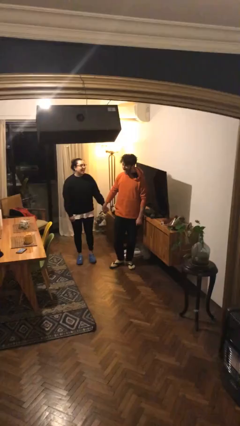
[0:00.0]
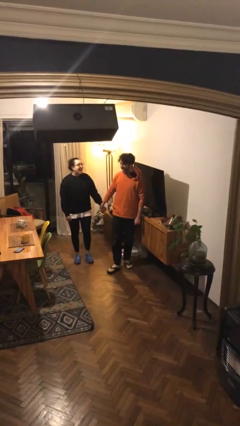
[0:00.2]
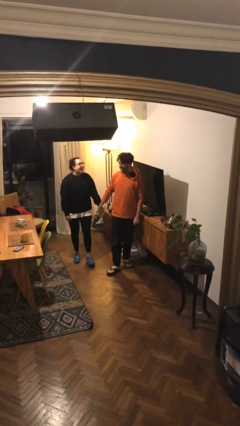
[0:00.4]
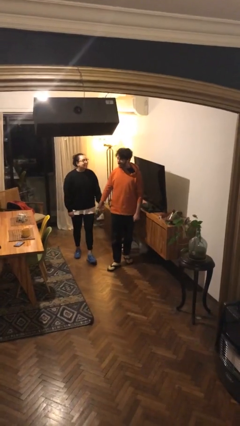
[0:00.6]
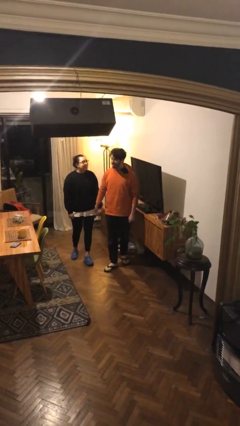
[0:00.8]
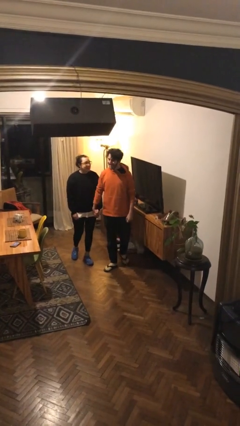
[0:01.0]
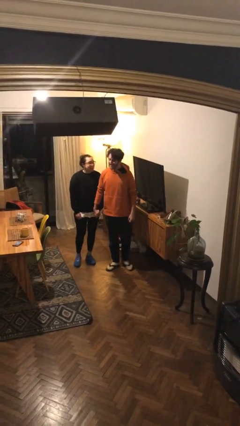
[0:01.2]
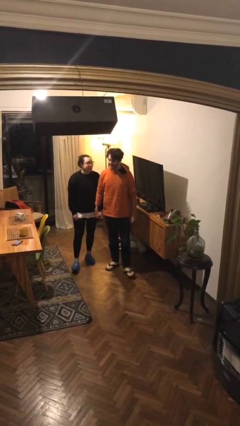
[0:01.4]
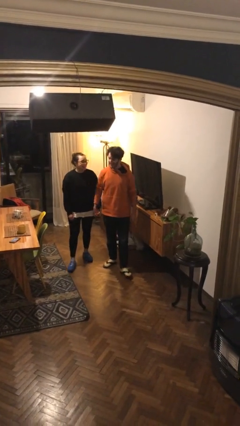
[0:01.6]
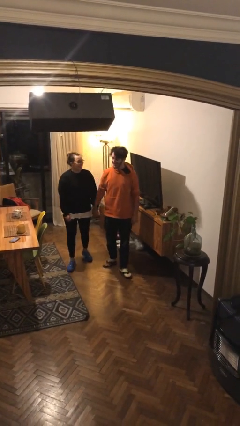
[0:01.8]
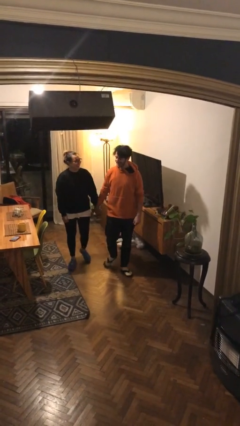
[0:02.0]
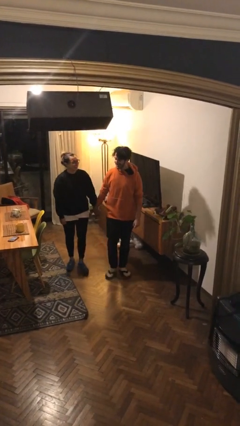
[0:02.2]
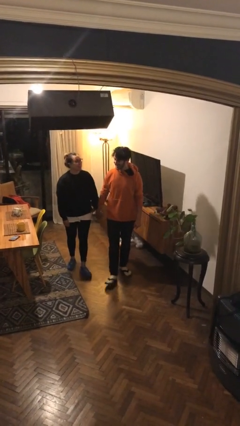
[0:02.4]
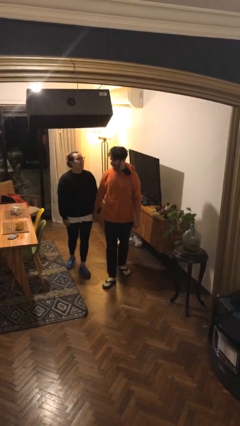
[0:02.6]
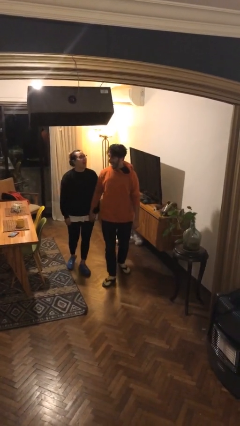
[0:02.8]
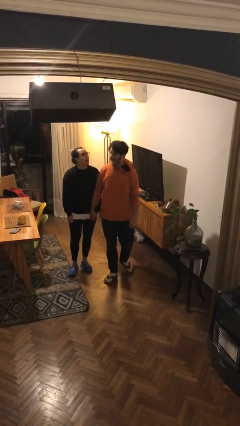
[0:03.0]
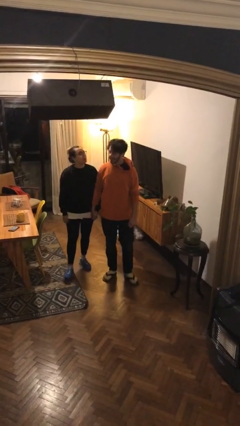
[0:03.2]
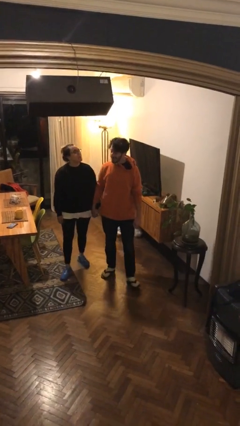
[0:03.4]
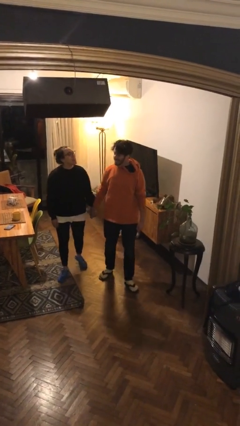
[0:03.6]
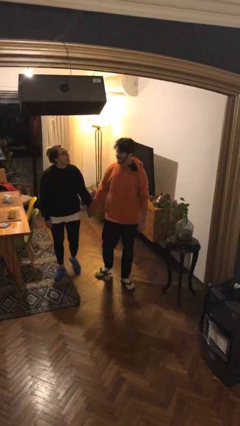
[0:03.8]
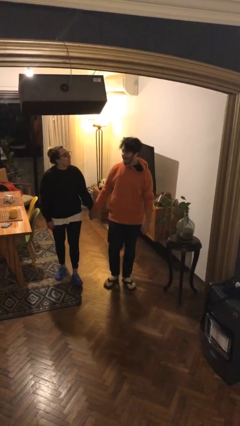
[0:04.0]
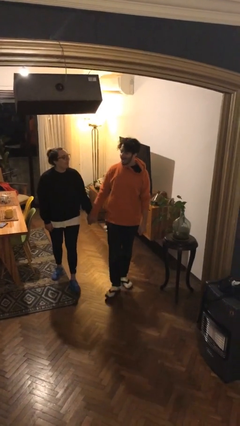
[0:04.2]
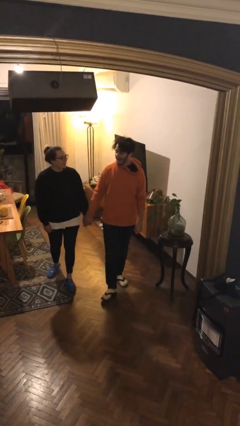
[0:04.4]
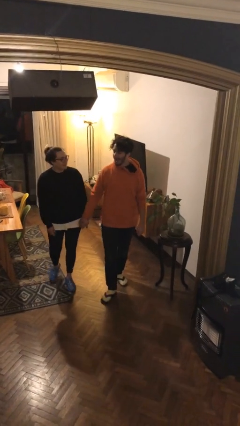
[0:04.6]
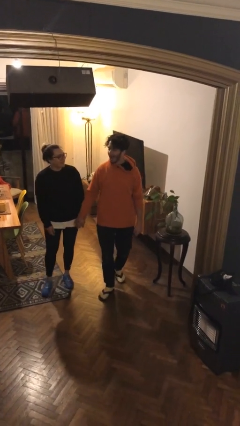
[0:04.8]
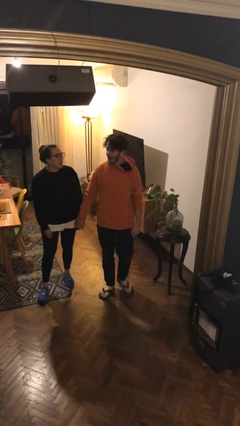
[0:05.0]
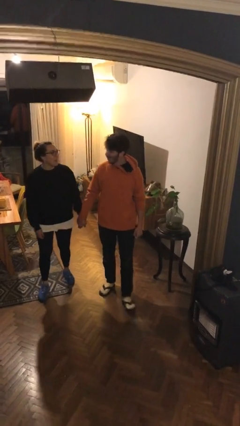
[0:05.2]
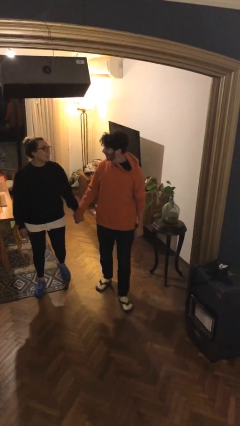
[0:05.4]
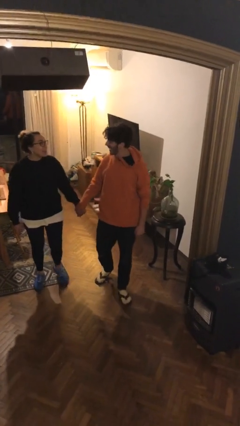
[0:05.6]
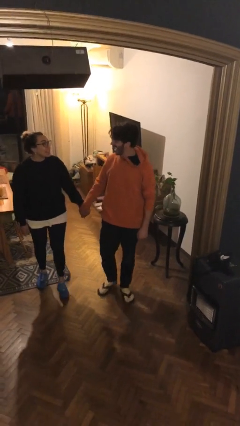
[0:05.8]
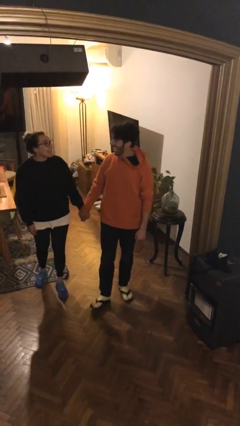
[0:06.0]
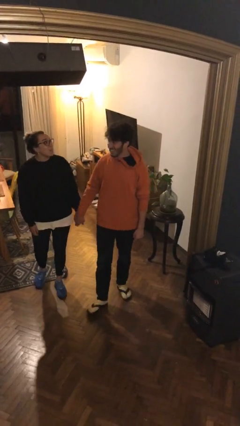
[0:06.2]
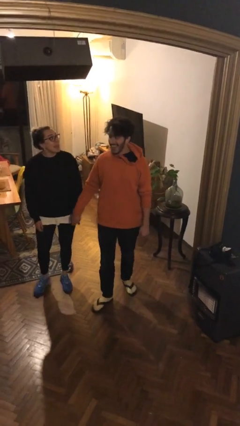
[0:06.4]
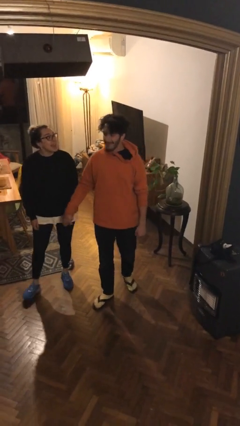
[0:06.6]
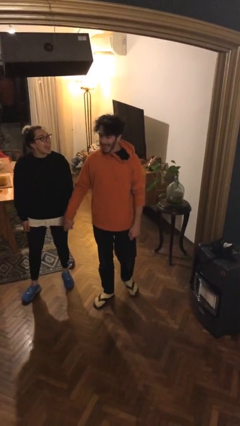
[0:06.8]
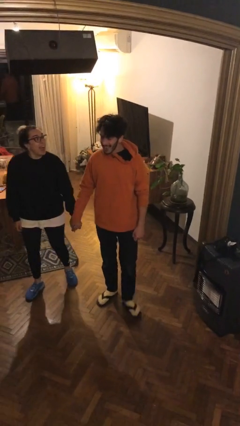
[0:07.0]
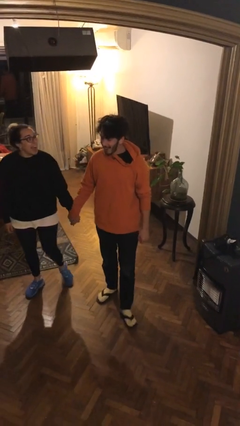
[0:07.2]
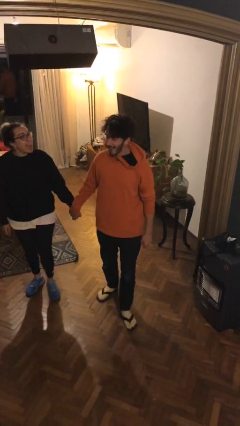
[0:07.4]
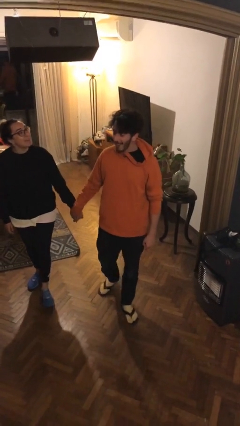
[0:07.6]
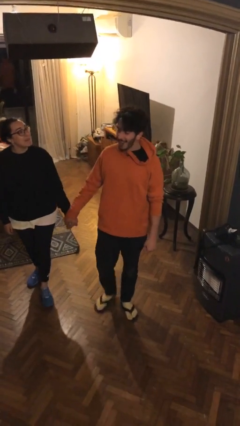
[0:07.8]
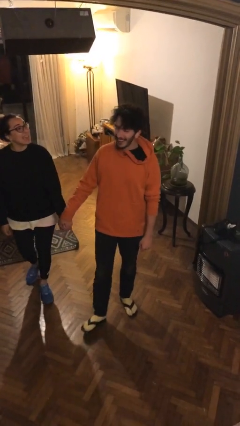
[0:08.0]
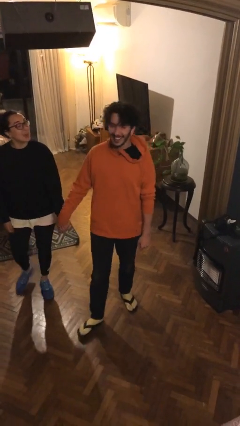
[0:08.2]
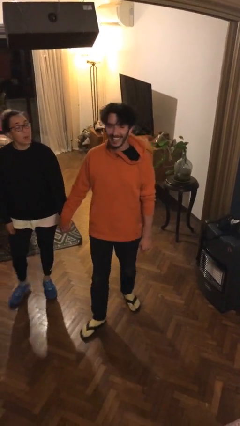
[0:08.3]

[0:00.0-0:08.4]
person holds hand

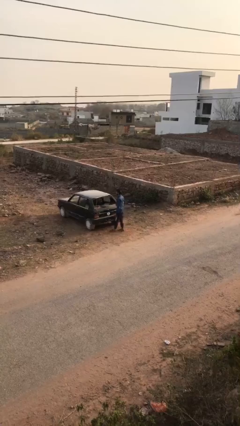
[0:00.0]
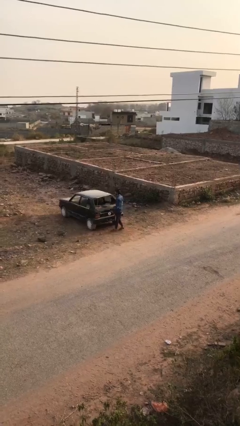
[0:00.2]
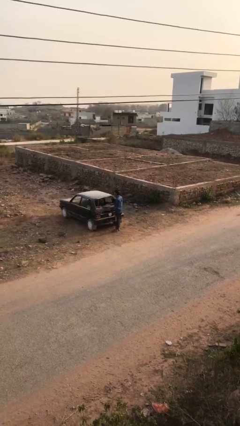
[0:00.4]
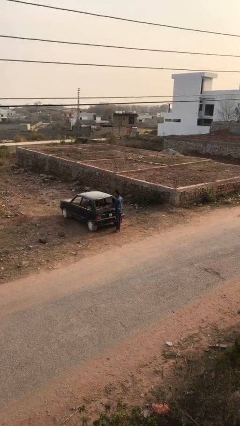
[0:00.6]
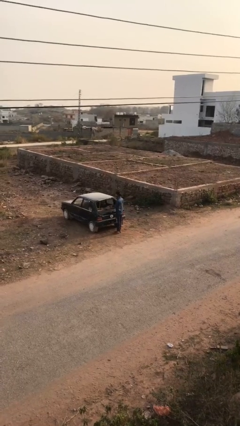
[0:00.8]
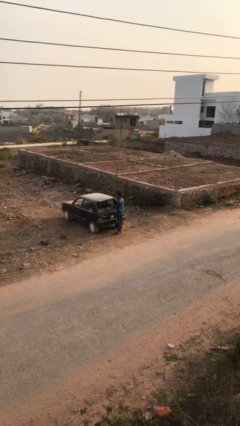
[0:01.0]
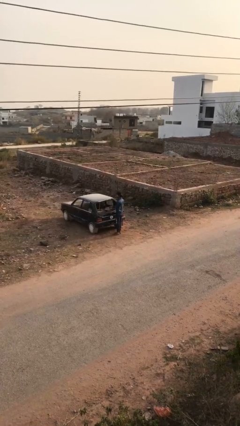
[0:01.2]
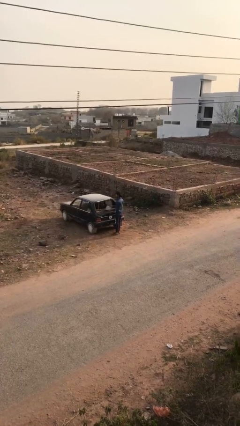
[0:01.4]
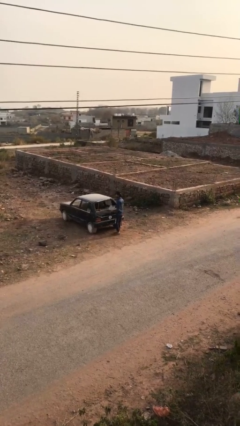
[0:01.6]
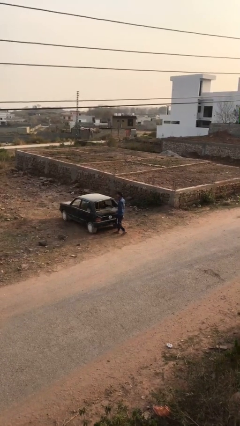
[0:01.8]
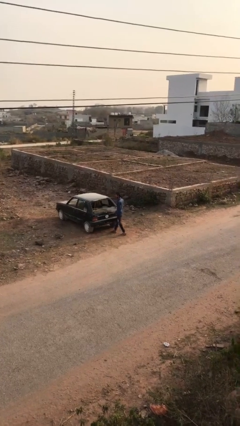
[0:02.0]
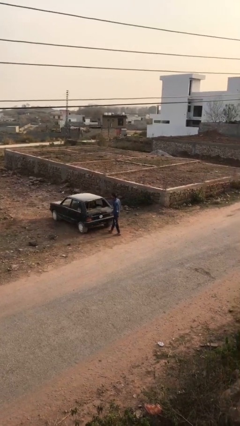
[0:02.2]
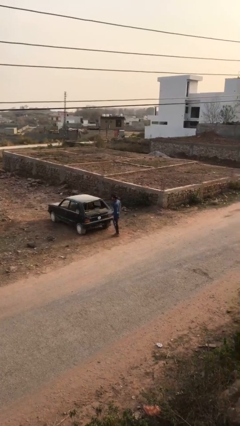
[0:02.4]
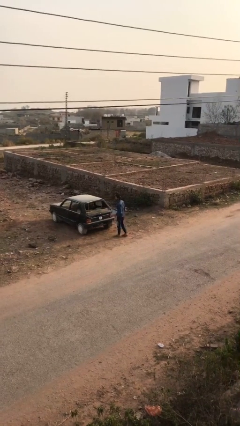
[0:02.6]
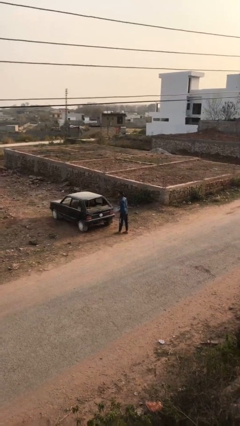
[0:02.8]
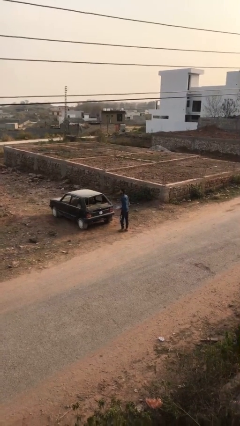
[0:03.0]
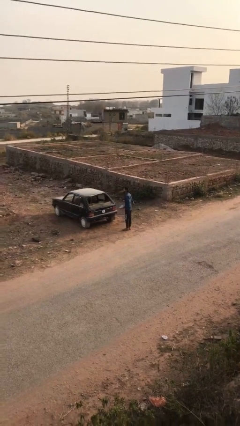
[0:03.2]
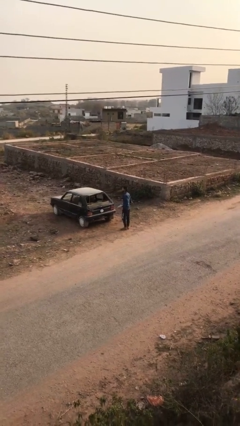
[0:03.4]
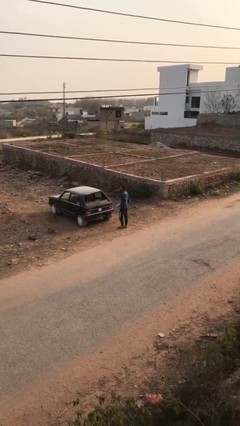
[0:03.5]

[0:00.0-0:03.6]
person unloads car

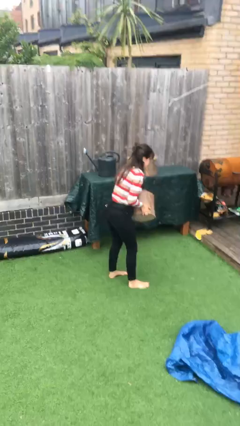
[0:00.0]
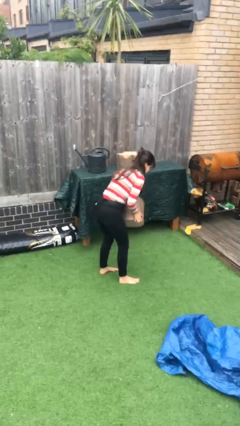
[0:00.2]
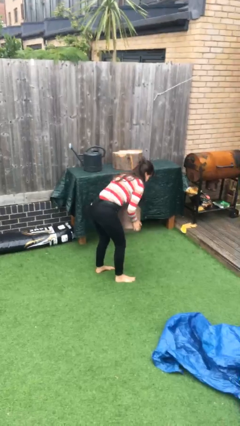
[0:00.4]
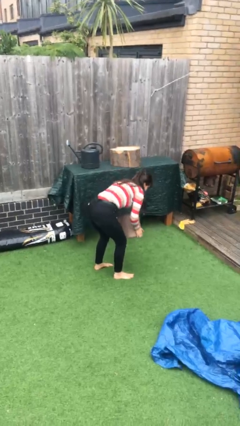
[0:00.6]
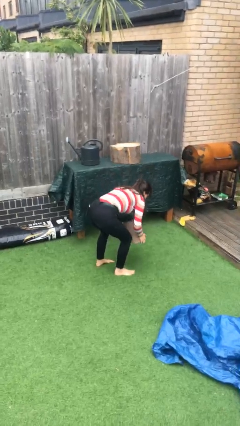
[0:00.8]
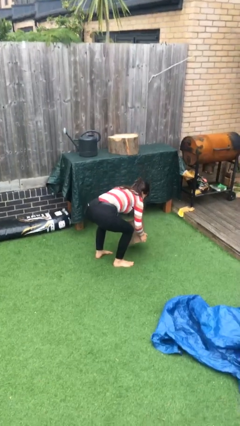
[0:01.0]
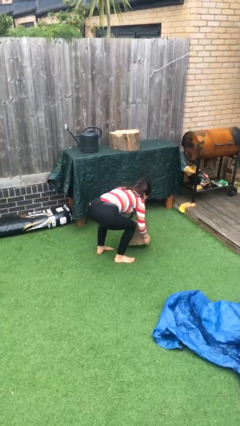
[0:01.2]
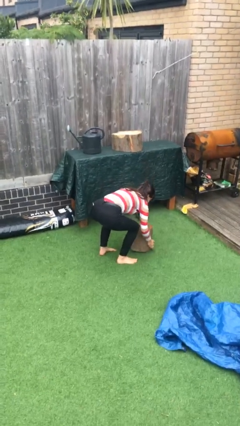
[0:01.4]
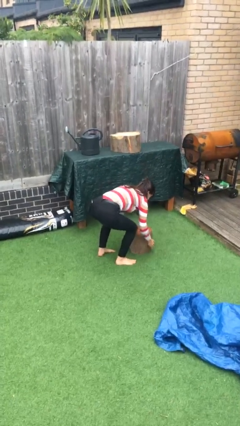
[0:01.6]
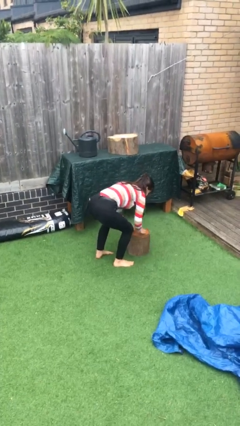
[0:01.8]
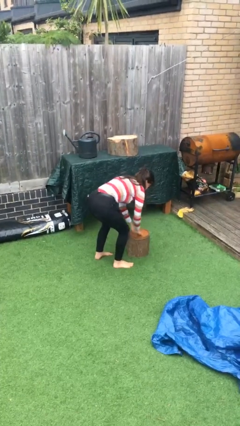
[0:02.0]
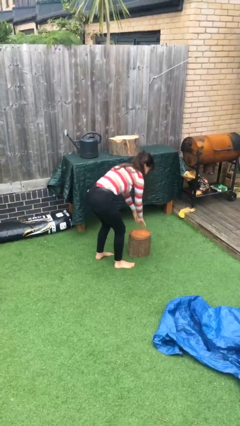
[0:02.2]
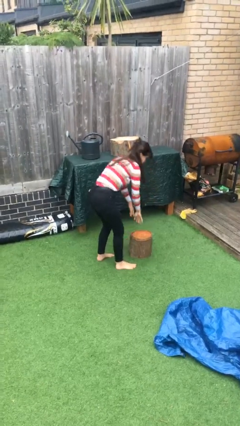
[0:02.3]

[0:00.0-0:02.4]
person puts down object on floor

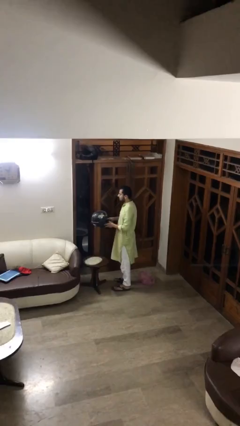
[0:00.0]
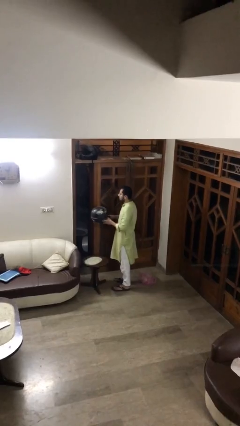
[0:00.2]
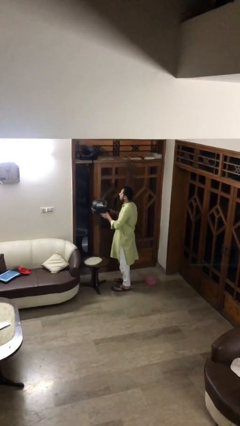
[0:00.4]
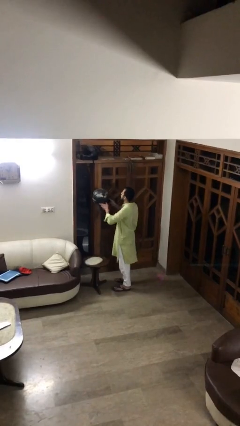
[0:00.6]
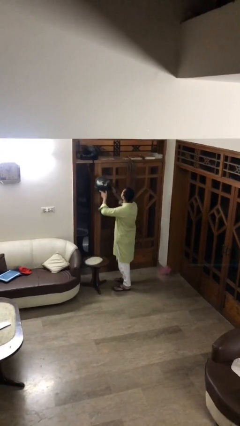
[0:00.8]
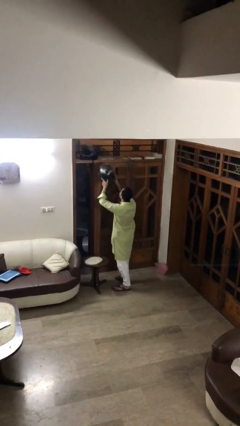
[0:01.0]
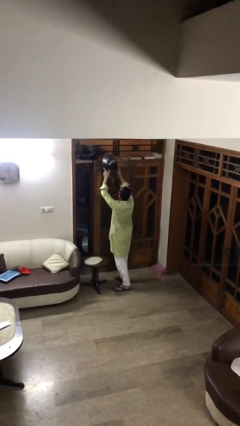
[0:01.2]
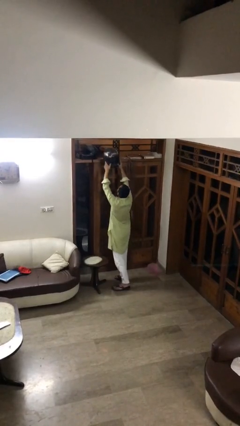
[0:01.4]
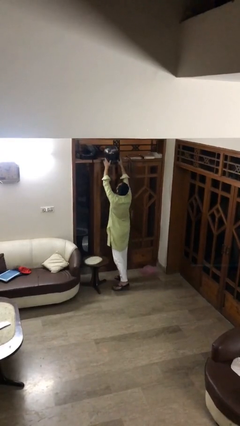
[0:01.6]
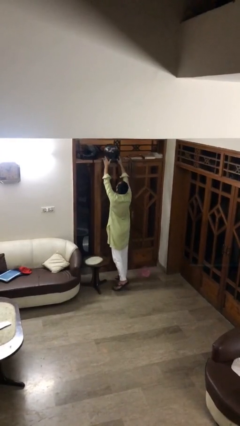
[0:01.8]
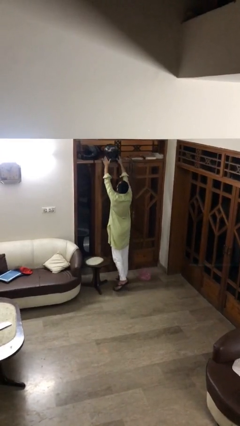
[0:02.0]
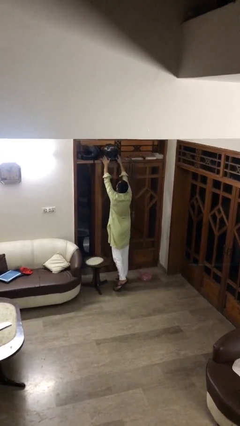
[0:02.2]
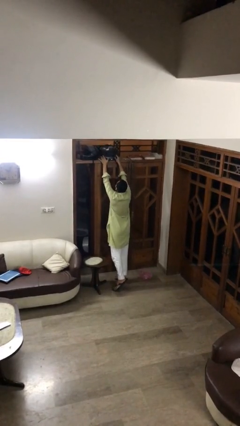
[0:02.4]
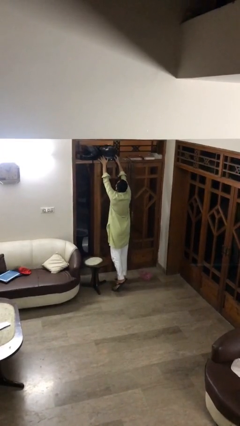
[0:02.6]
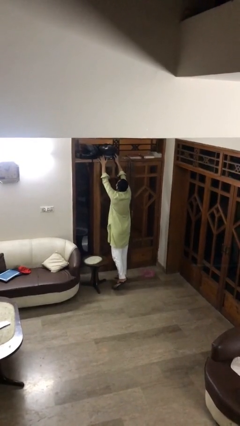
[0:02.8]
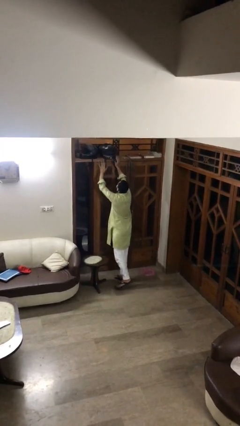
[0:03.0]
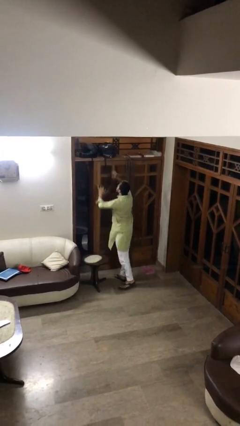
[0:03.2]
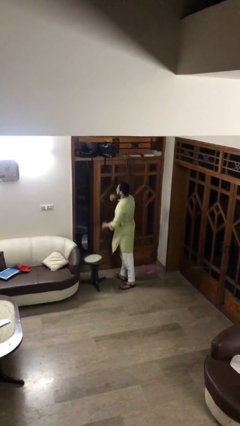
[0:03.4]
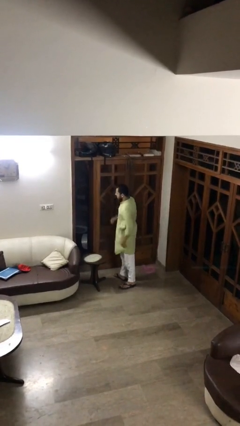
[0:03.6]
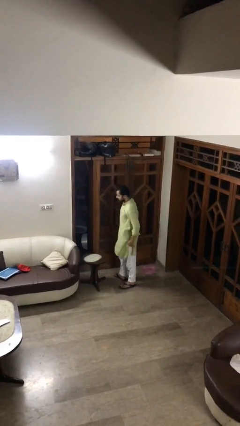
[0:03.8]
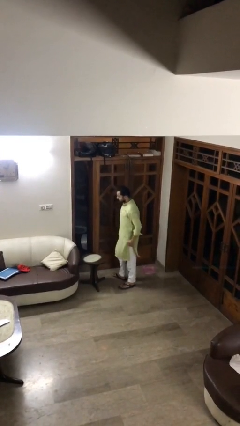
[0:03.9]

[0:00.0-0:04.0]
person puts down object on shelf
